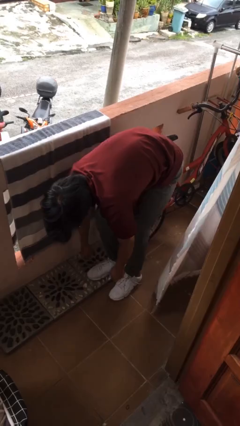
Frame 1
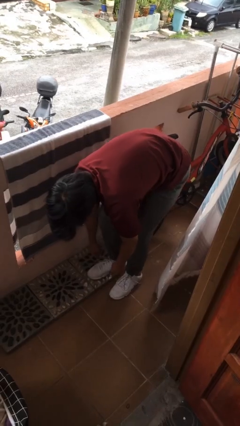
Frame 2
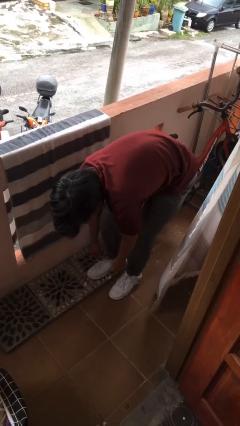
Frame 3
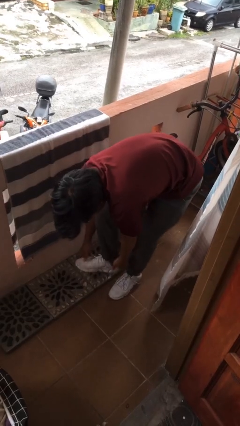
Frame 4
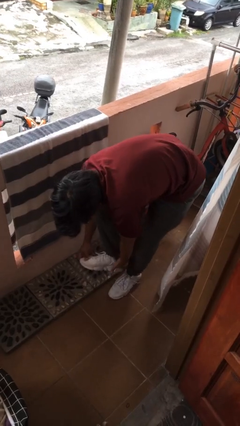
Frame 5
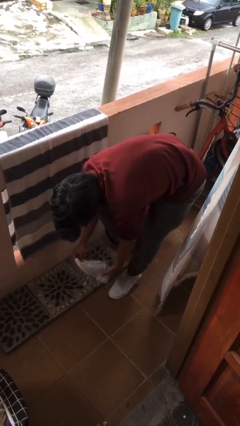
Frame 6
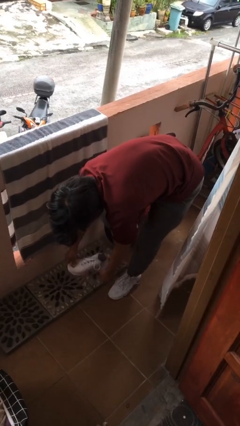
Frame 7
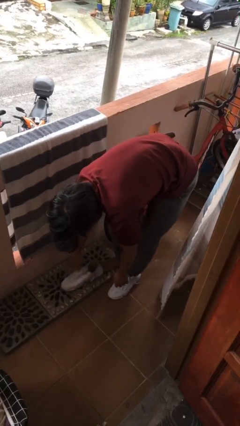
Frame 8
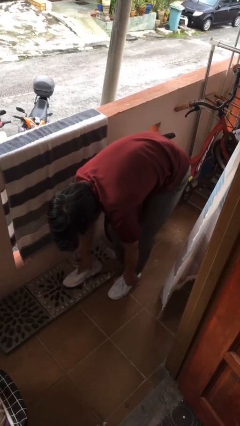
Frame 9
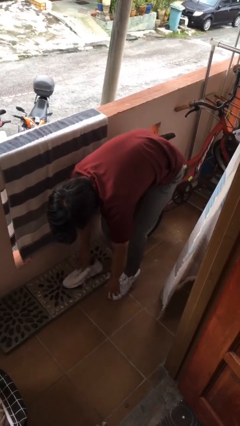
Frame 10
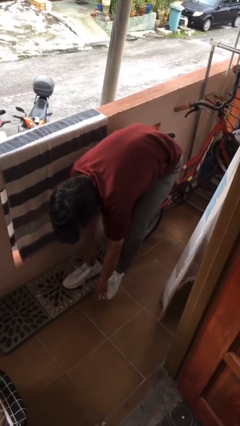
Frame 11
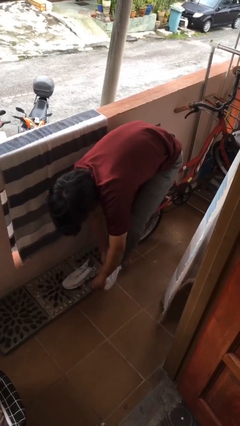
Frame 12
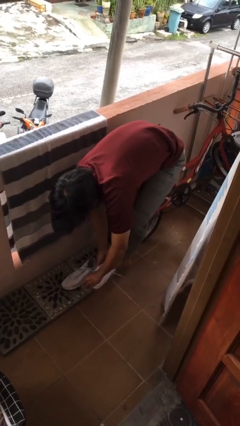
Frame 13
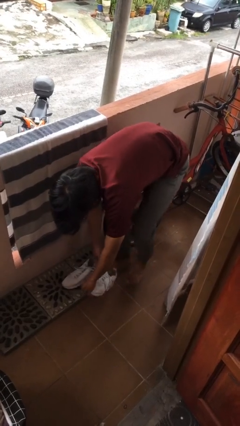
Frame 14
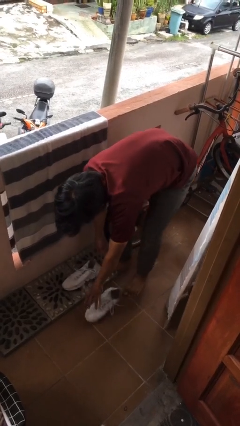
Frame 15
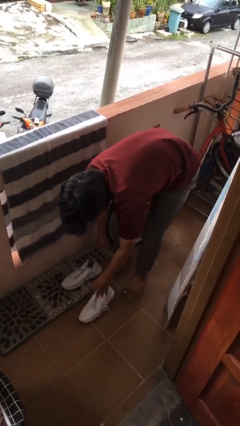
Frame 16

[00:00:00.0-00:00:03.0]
person takes off shoes

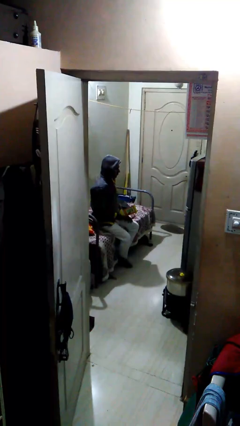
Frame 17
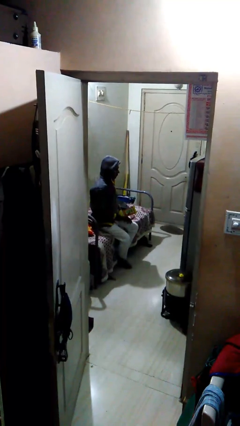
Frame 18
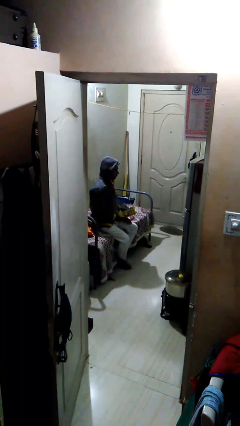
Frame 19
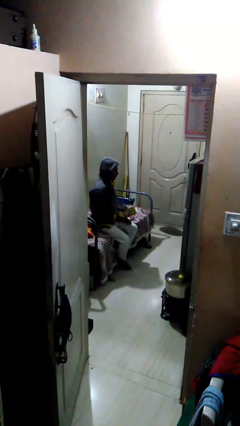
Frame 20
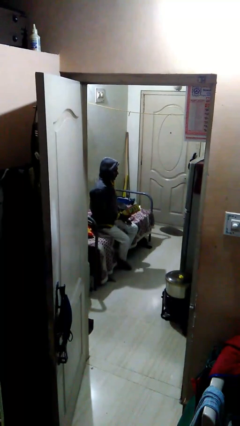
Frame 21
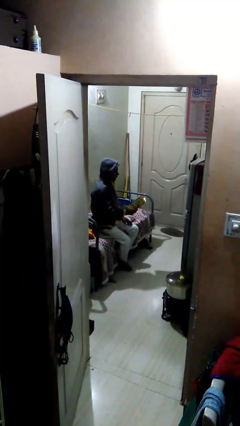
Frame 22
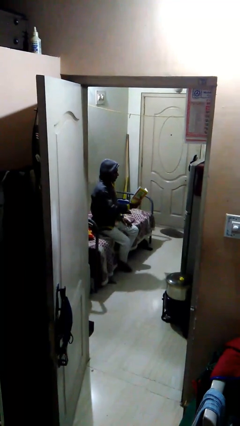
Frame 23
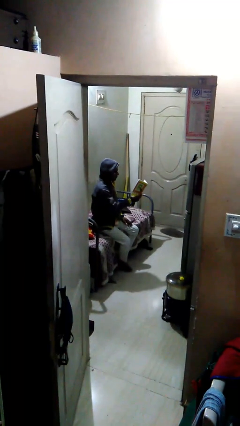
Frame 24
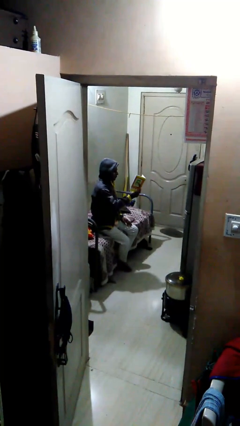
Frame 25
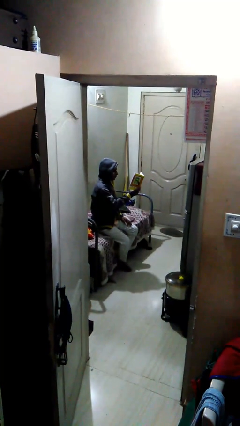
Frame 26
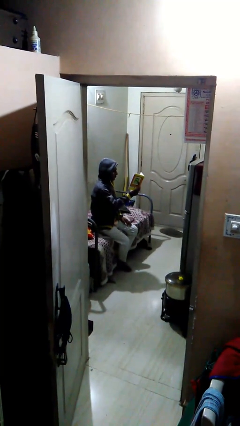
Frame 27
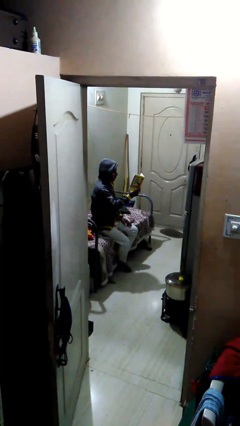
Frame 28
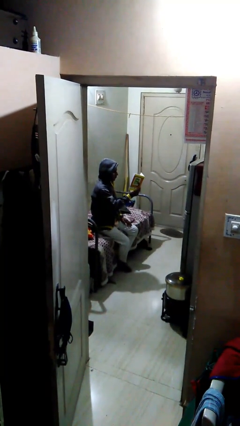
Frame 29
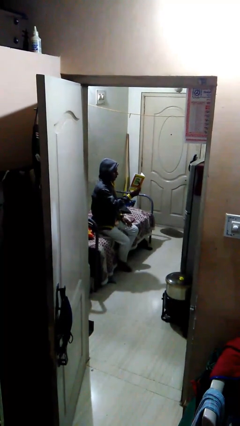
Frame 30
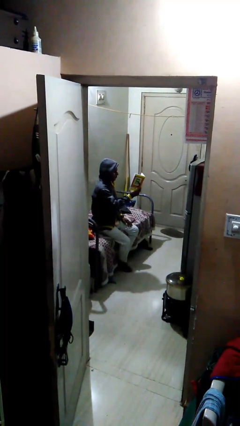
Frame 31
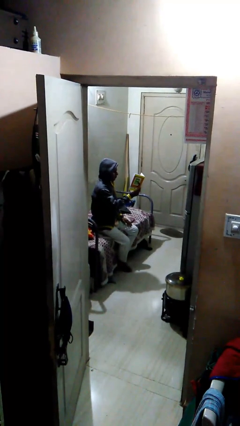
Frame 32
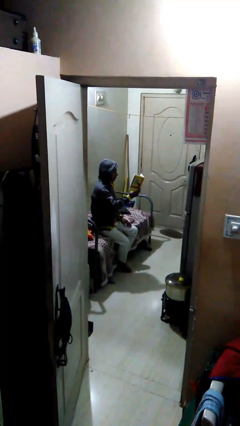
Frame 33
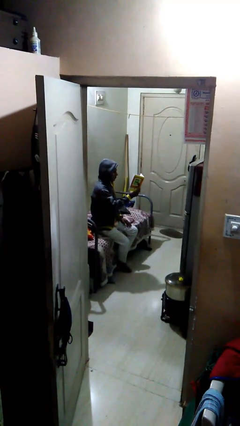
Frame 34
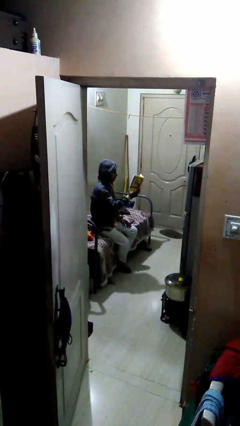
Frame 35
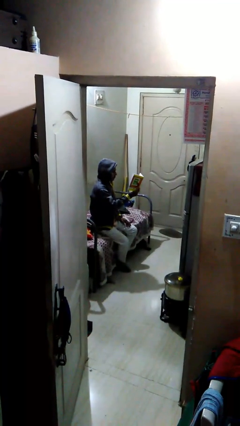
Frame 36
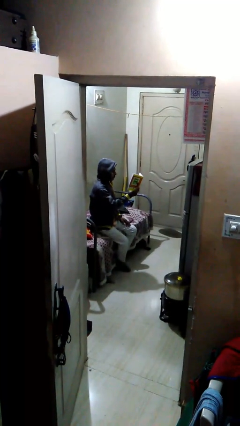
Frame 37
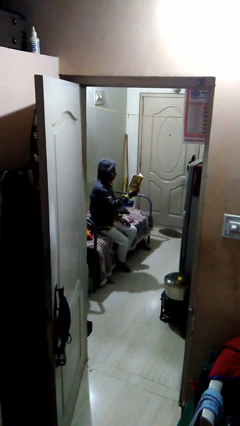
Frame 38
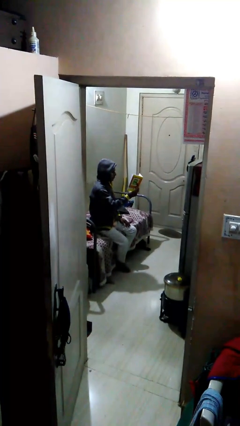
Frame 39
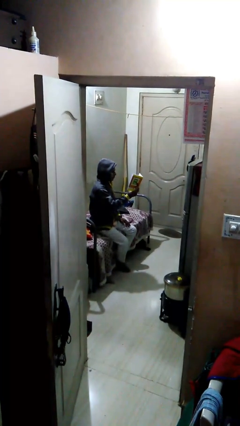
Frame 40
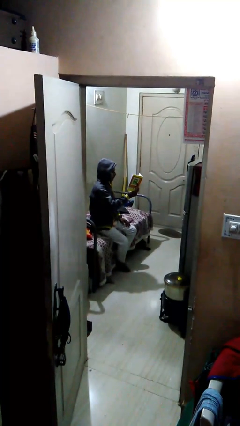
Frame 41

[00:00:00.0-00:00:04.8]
person reads document

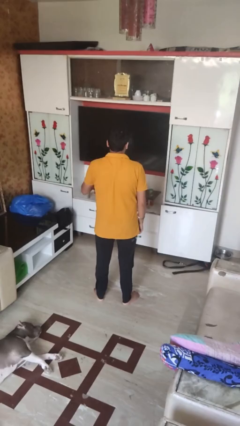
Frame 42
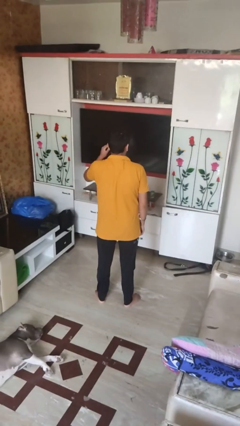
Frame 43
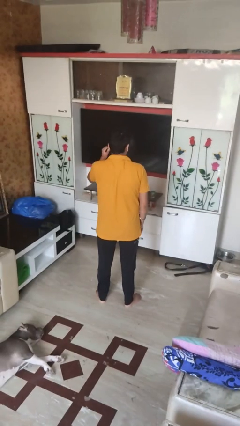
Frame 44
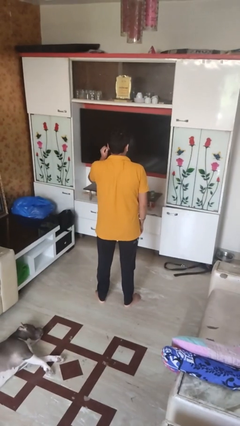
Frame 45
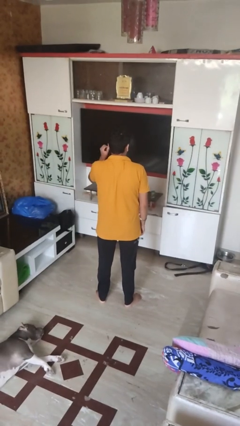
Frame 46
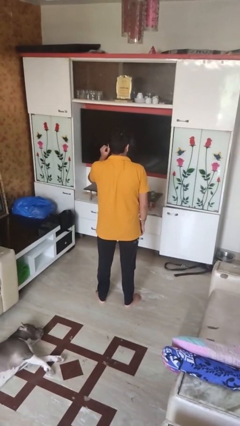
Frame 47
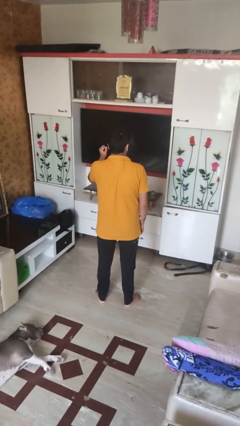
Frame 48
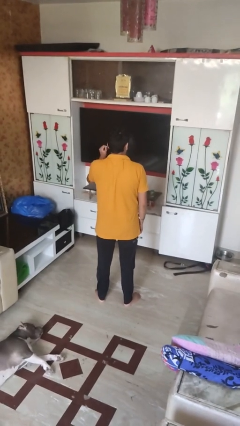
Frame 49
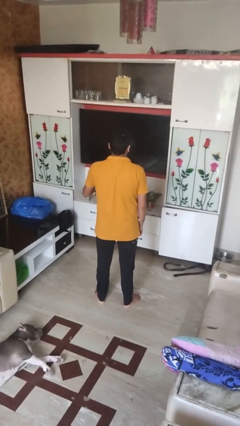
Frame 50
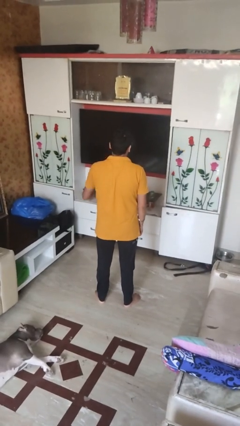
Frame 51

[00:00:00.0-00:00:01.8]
person touches earlobe

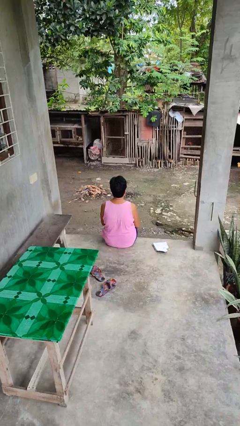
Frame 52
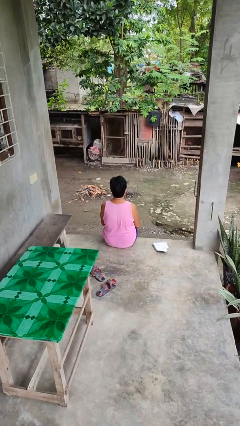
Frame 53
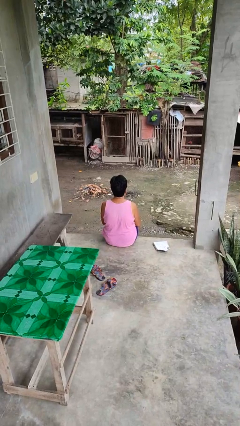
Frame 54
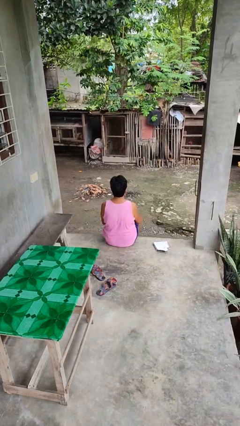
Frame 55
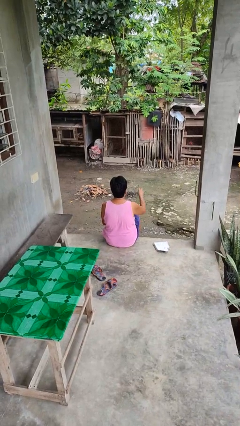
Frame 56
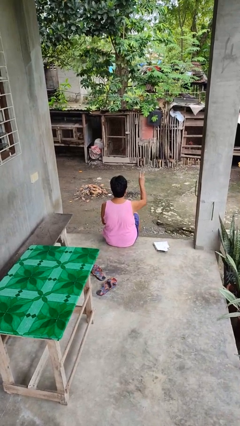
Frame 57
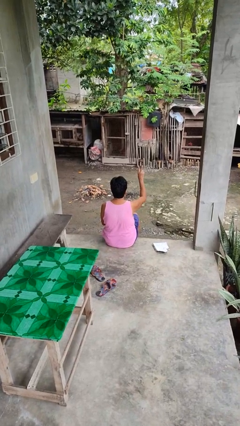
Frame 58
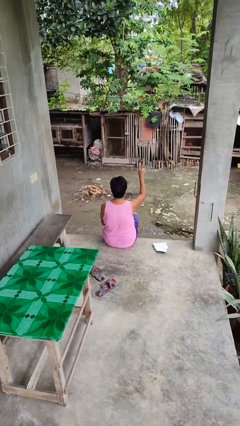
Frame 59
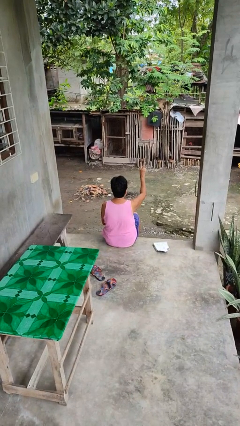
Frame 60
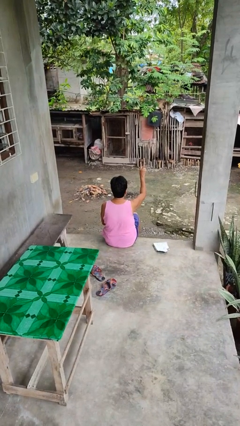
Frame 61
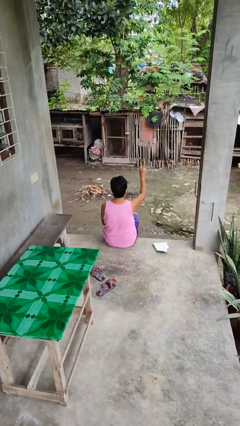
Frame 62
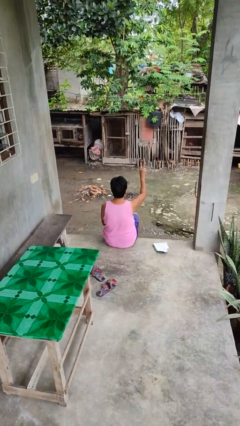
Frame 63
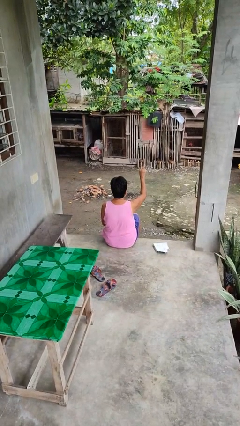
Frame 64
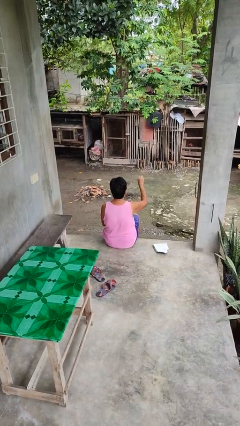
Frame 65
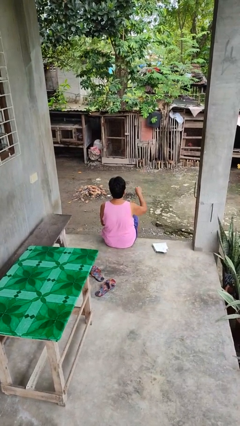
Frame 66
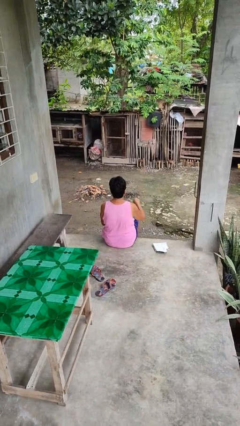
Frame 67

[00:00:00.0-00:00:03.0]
person gestures peace

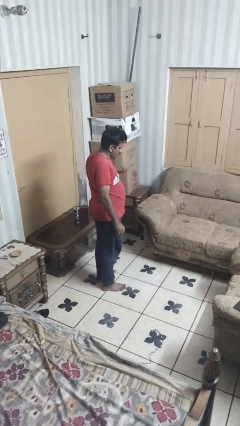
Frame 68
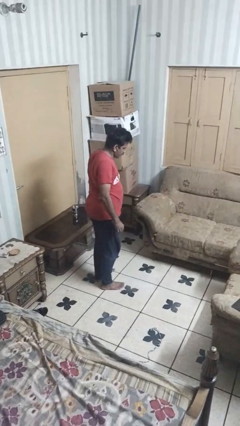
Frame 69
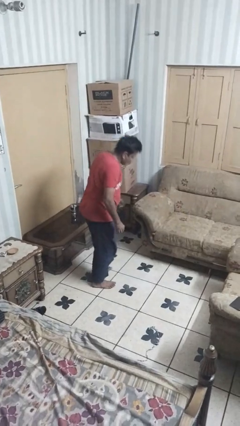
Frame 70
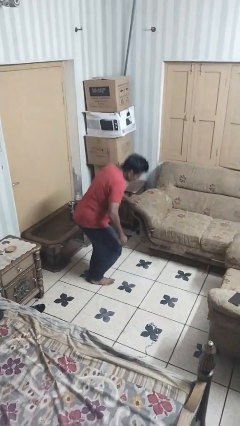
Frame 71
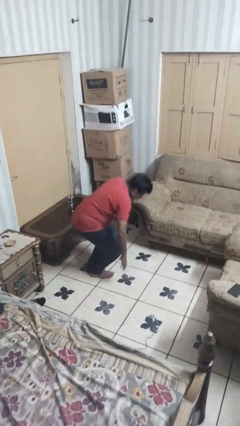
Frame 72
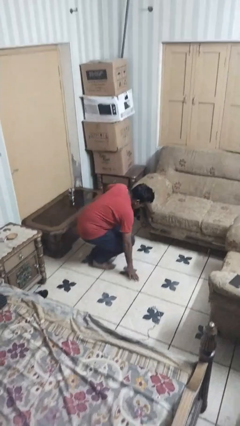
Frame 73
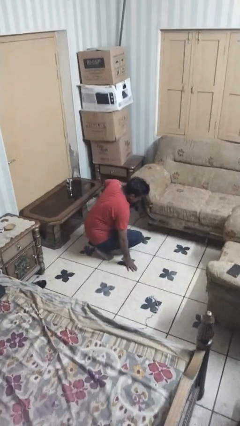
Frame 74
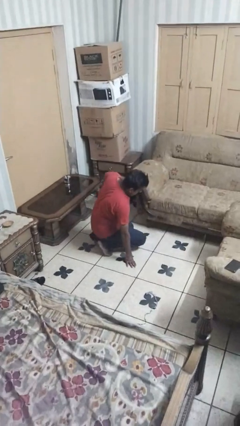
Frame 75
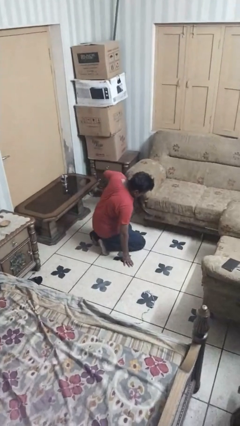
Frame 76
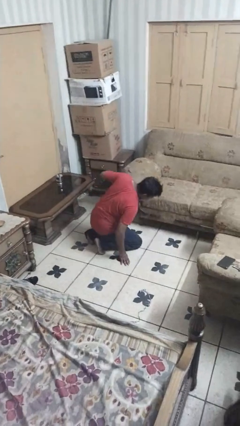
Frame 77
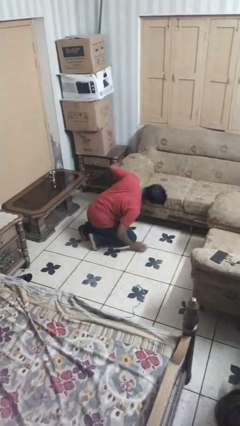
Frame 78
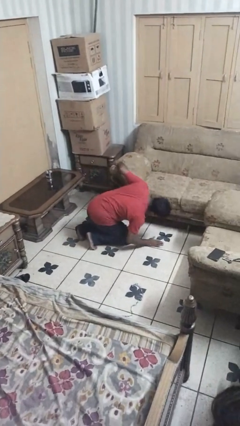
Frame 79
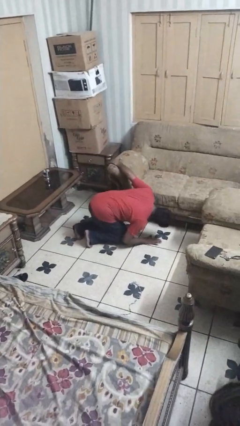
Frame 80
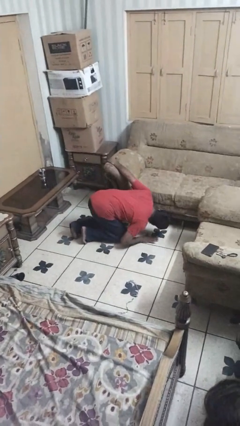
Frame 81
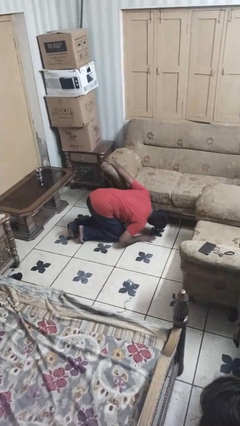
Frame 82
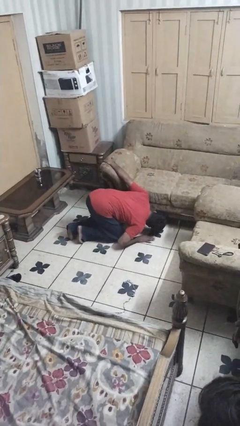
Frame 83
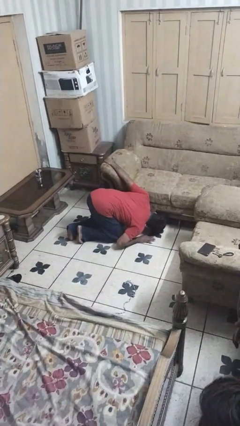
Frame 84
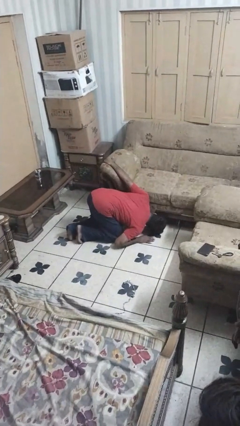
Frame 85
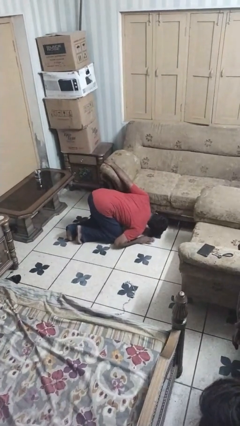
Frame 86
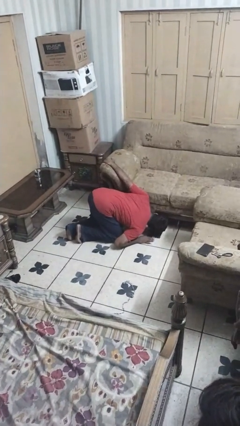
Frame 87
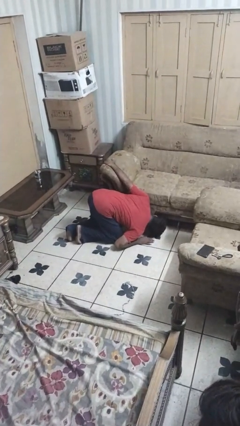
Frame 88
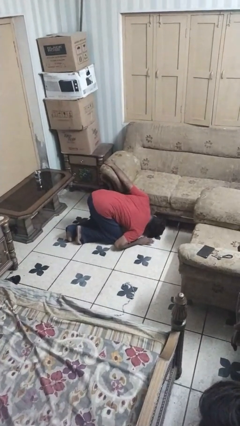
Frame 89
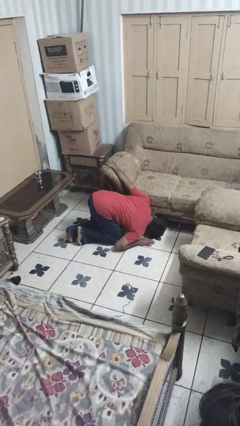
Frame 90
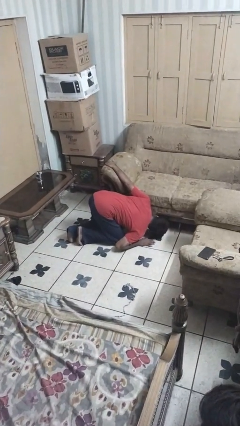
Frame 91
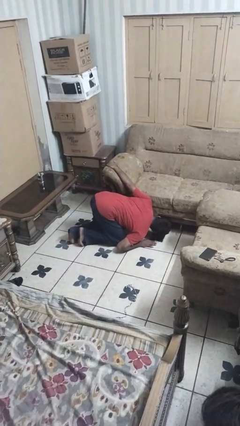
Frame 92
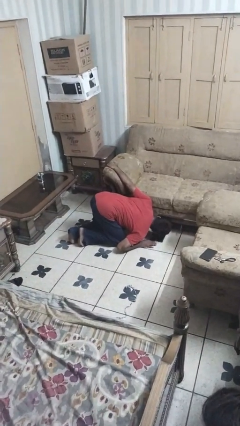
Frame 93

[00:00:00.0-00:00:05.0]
person searches under couch

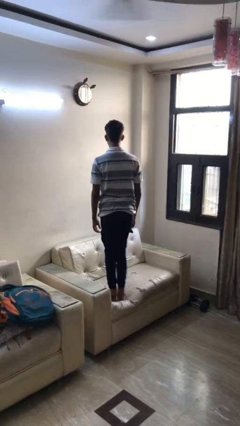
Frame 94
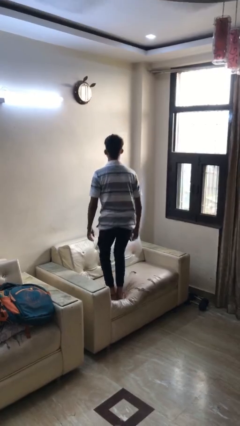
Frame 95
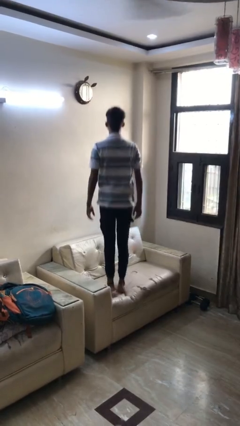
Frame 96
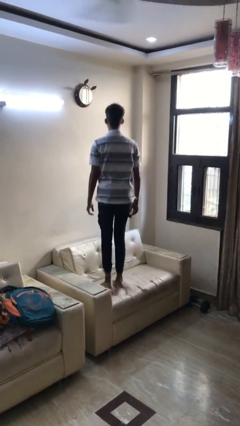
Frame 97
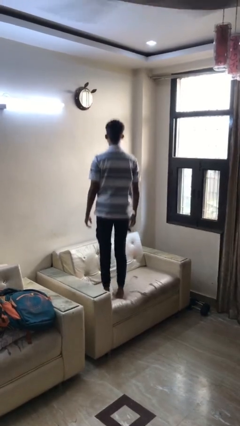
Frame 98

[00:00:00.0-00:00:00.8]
person jumps on couch
